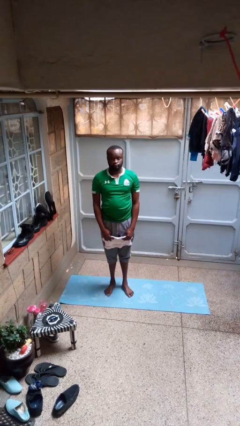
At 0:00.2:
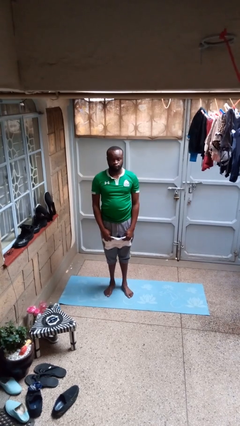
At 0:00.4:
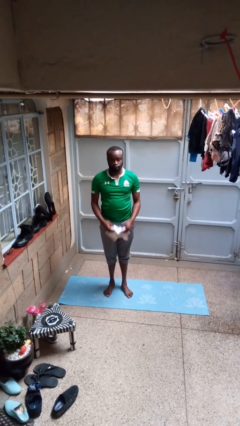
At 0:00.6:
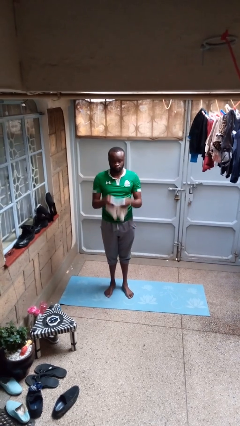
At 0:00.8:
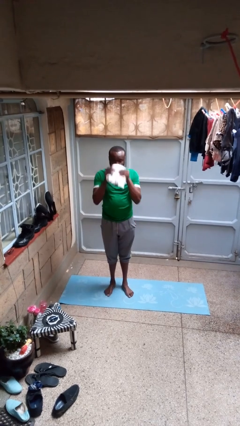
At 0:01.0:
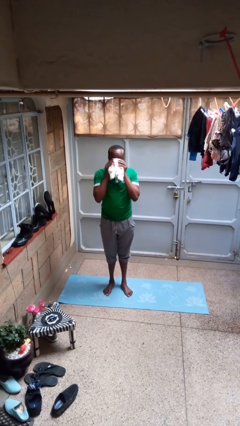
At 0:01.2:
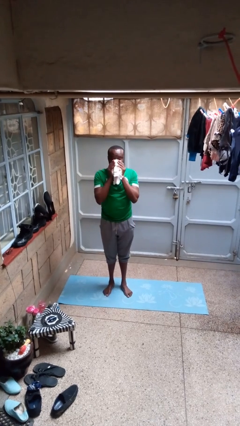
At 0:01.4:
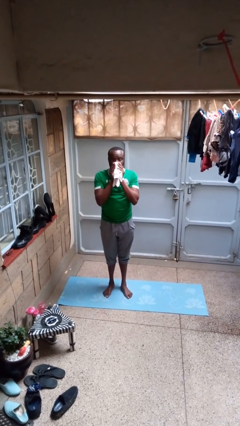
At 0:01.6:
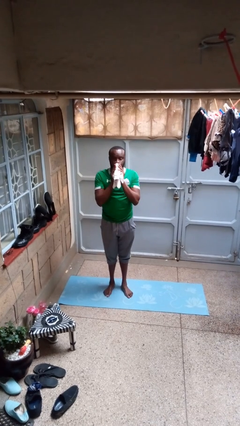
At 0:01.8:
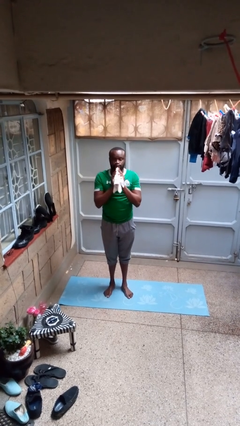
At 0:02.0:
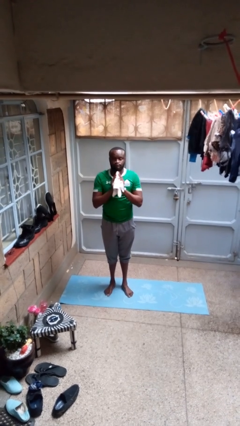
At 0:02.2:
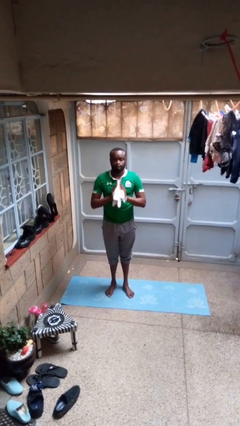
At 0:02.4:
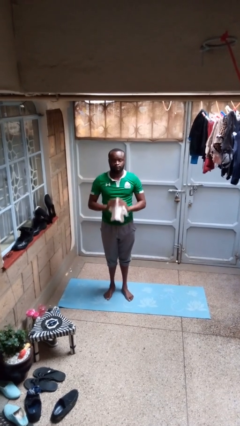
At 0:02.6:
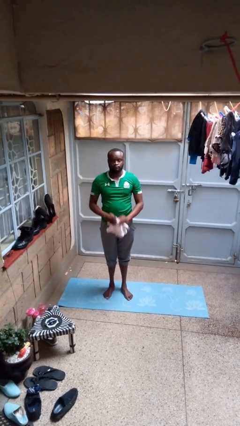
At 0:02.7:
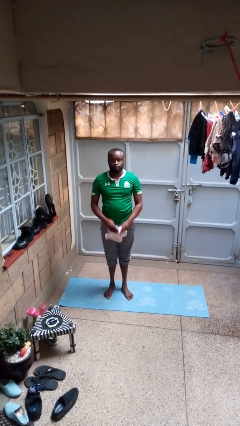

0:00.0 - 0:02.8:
person wipes mouth with napkin

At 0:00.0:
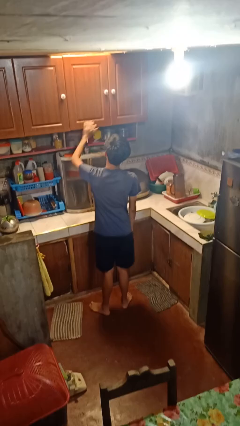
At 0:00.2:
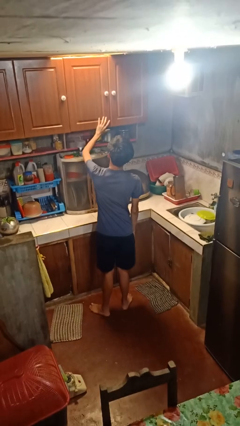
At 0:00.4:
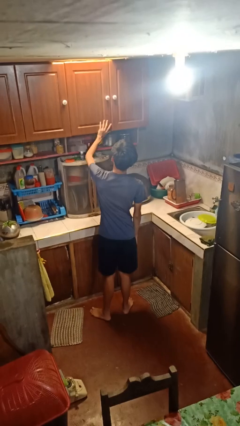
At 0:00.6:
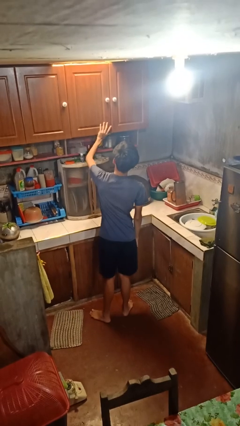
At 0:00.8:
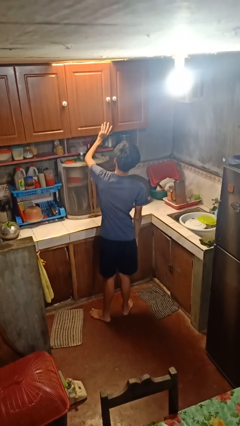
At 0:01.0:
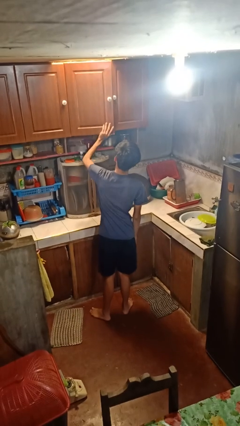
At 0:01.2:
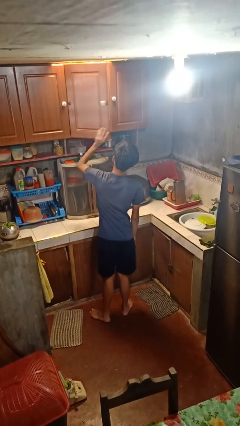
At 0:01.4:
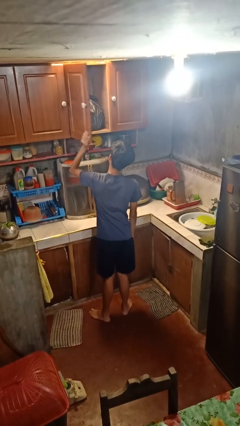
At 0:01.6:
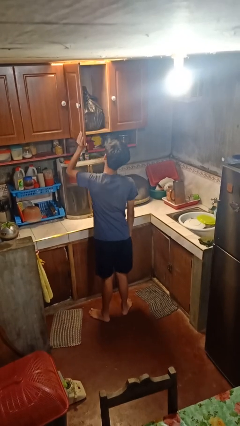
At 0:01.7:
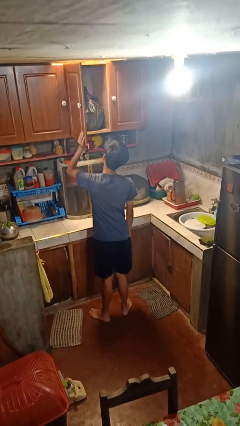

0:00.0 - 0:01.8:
person opens cabinet

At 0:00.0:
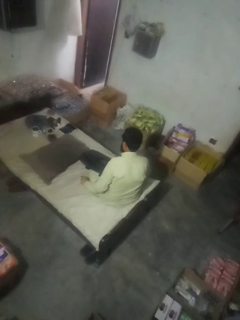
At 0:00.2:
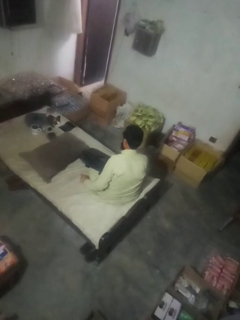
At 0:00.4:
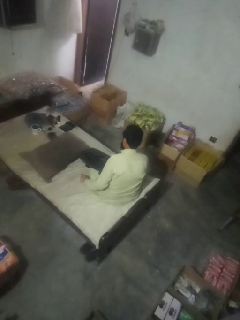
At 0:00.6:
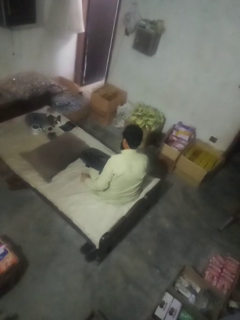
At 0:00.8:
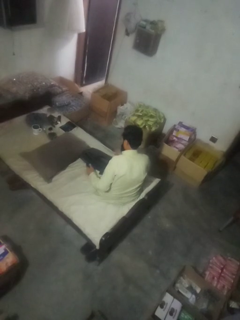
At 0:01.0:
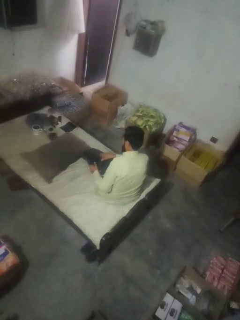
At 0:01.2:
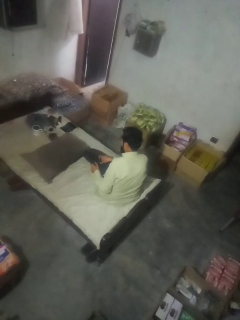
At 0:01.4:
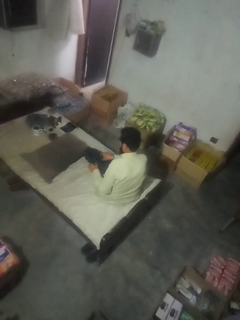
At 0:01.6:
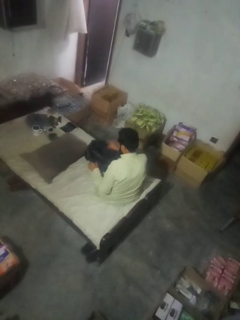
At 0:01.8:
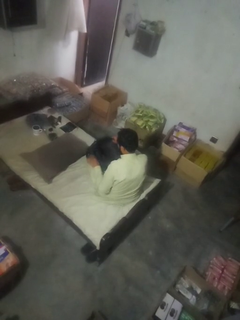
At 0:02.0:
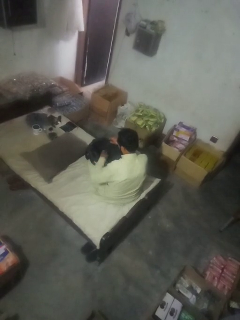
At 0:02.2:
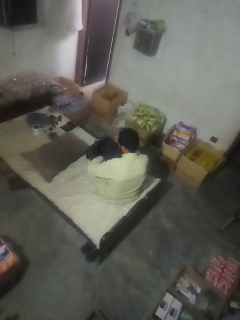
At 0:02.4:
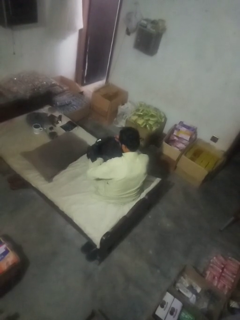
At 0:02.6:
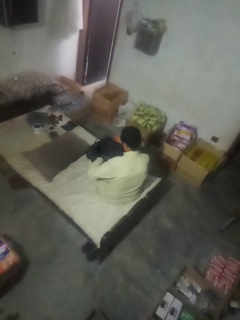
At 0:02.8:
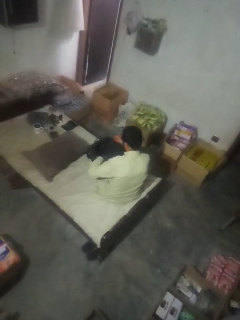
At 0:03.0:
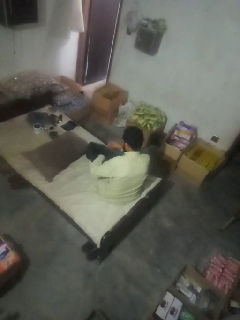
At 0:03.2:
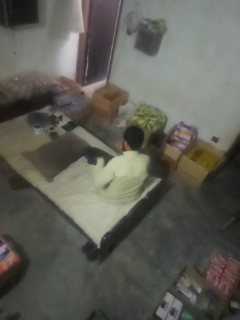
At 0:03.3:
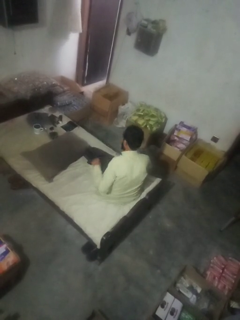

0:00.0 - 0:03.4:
person searches in bag

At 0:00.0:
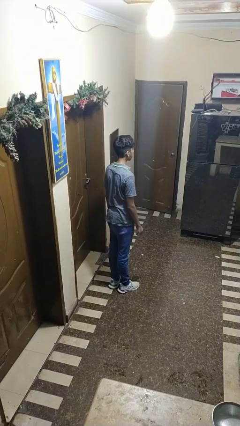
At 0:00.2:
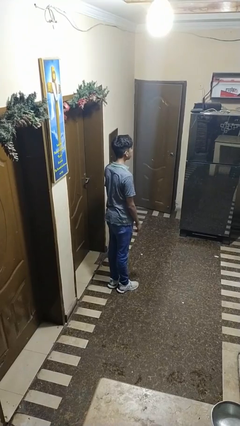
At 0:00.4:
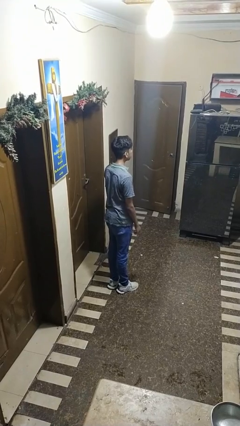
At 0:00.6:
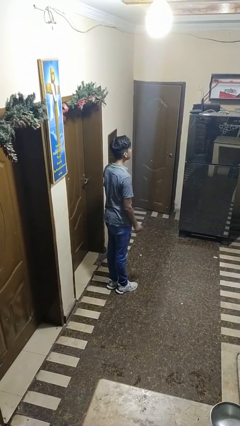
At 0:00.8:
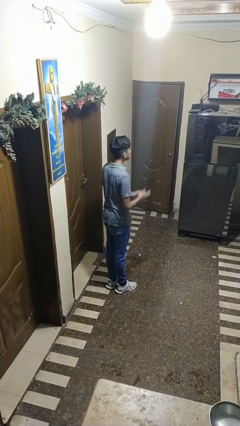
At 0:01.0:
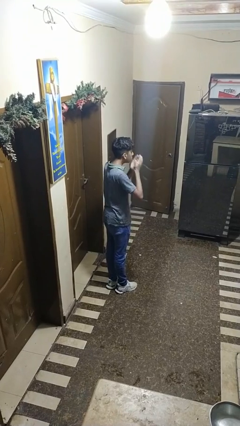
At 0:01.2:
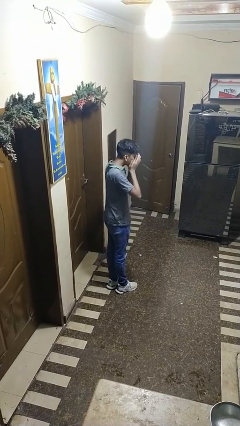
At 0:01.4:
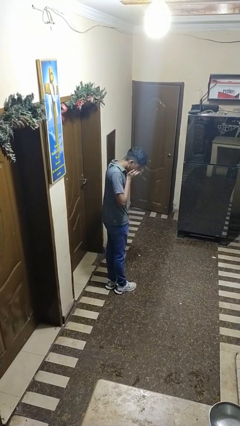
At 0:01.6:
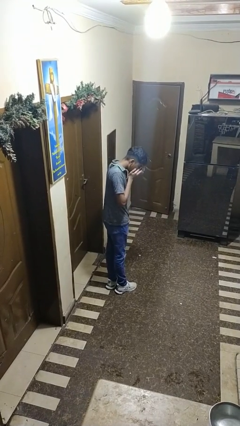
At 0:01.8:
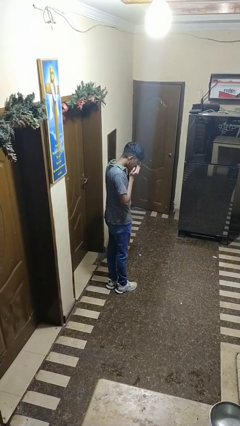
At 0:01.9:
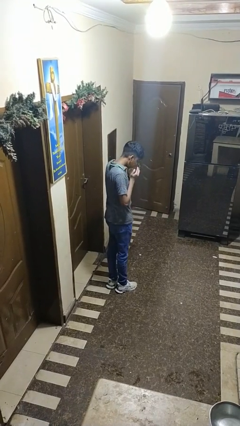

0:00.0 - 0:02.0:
person sneezes into hand

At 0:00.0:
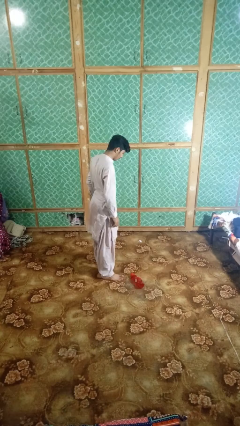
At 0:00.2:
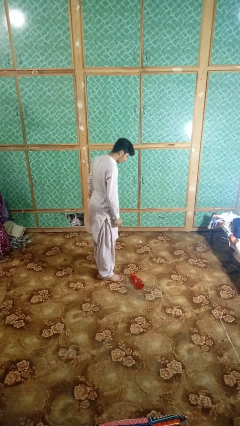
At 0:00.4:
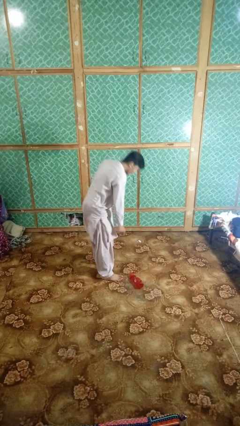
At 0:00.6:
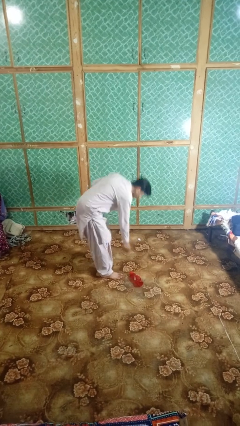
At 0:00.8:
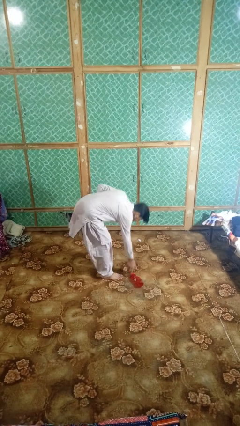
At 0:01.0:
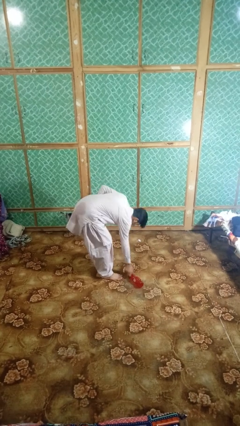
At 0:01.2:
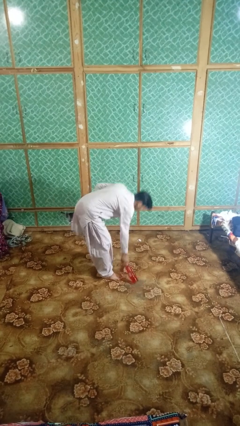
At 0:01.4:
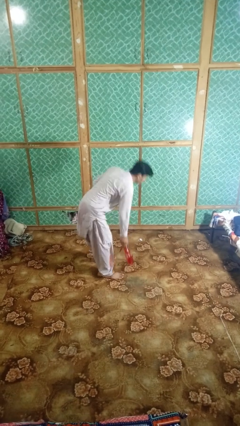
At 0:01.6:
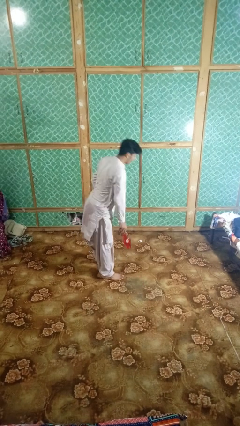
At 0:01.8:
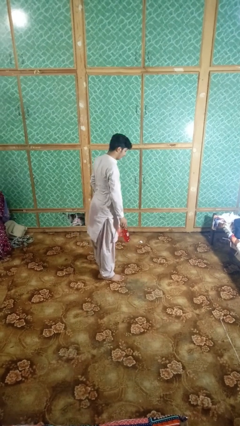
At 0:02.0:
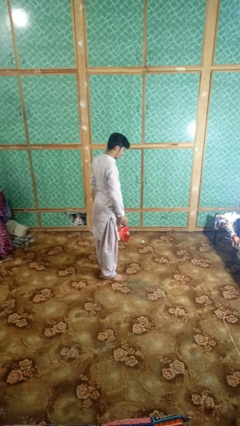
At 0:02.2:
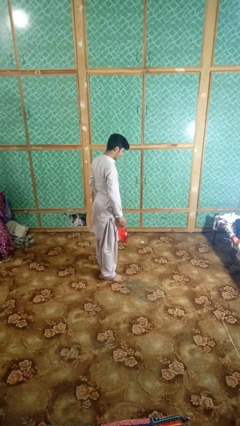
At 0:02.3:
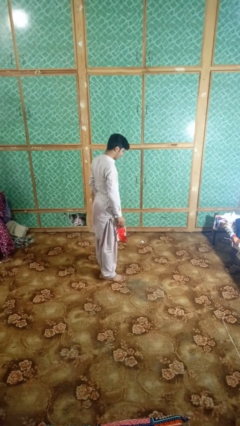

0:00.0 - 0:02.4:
person picks up object from floor

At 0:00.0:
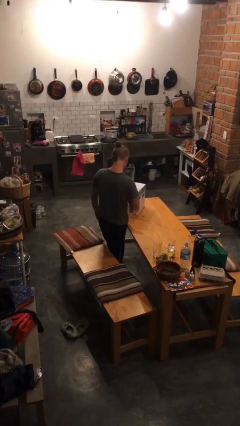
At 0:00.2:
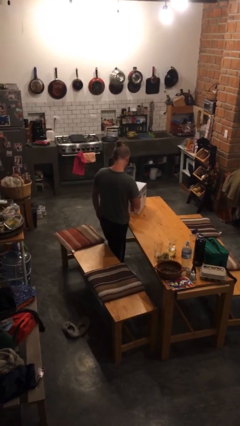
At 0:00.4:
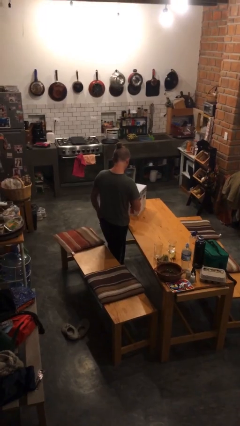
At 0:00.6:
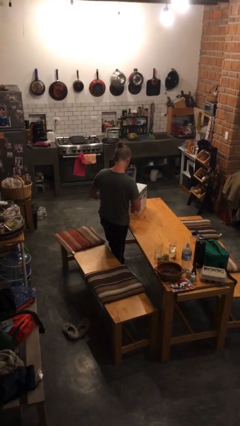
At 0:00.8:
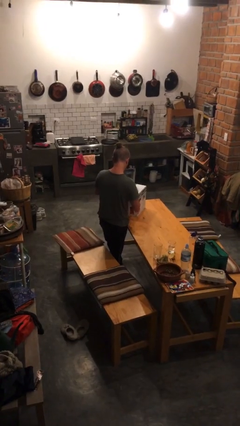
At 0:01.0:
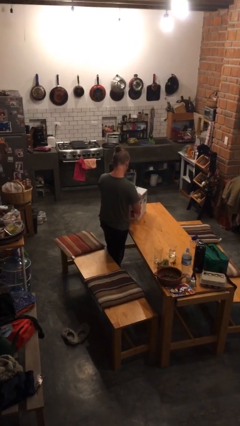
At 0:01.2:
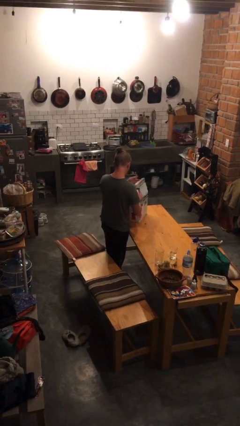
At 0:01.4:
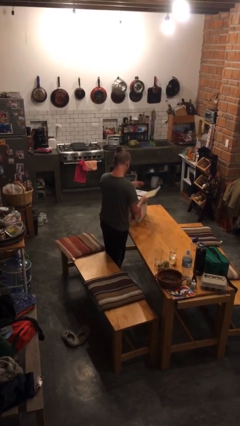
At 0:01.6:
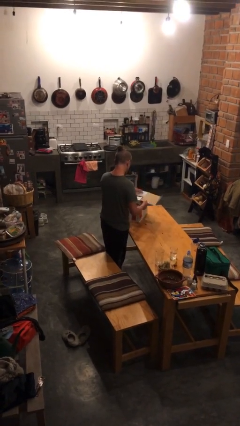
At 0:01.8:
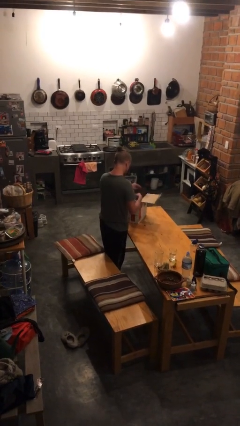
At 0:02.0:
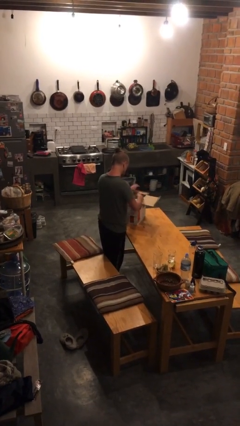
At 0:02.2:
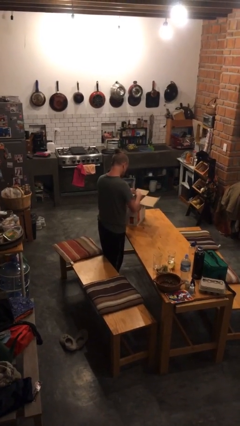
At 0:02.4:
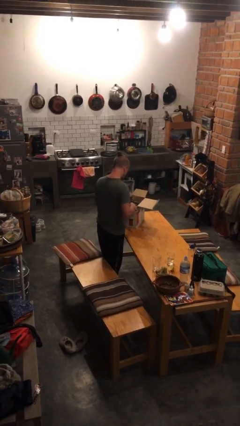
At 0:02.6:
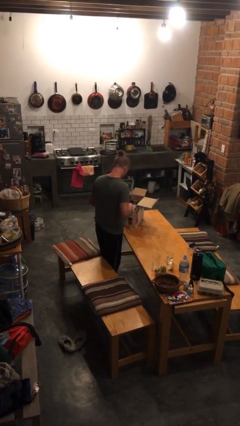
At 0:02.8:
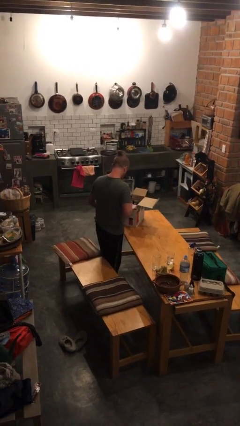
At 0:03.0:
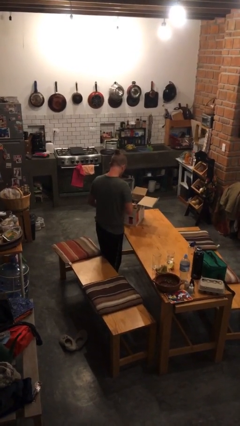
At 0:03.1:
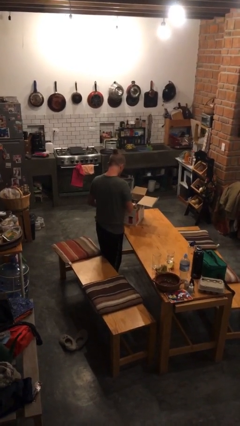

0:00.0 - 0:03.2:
person opens box

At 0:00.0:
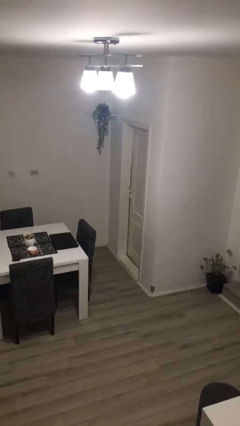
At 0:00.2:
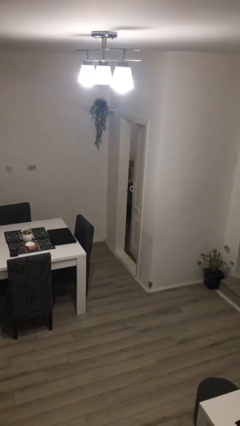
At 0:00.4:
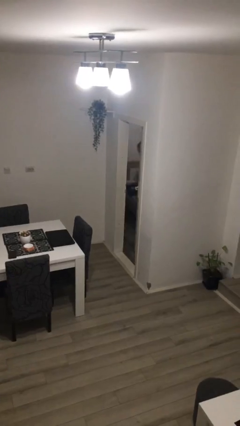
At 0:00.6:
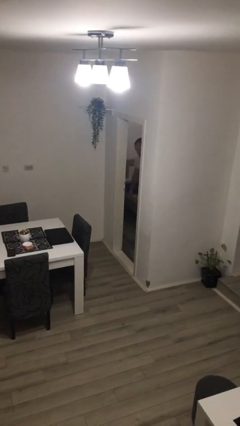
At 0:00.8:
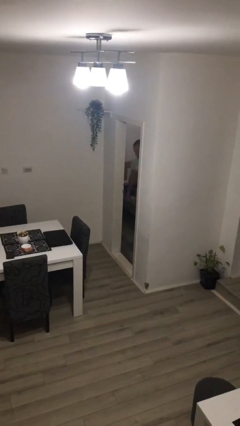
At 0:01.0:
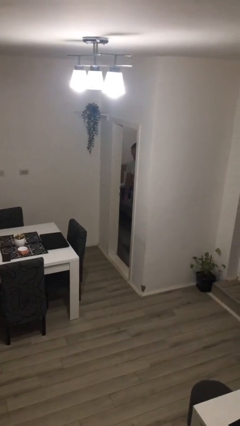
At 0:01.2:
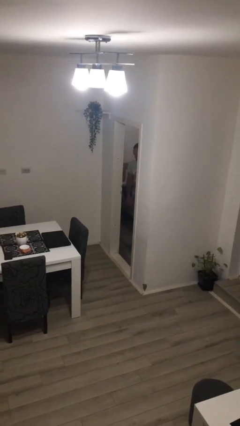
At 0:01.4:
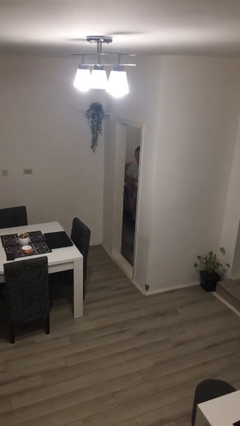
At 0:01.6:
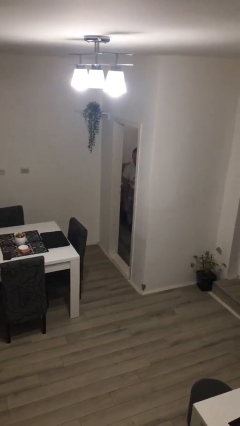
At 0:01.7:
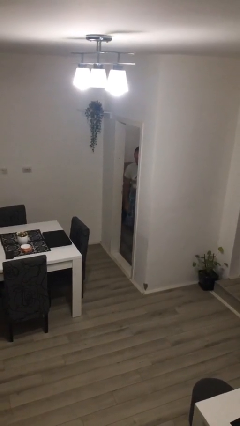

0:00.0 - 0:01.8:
person opens facility door

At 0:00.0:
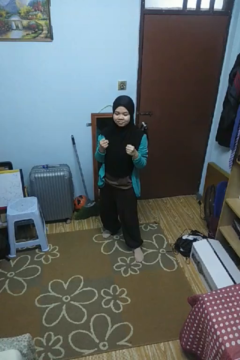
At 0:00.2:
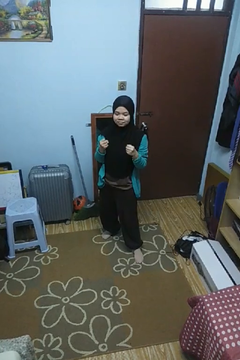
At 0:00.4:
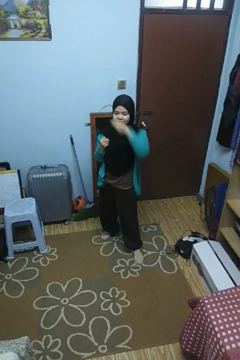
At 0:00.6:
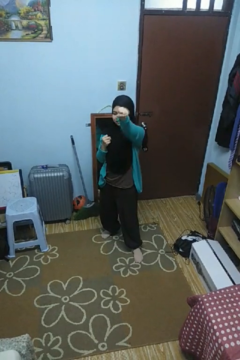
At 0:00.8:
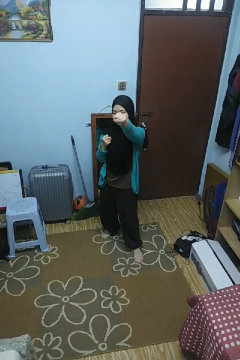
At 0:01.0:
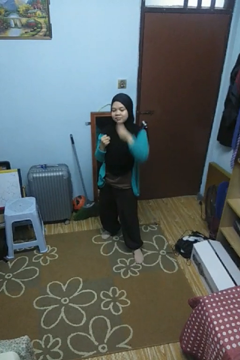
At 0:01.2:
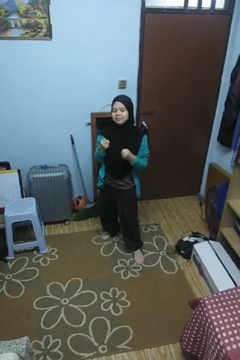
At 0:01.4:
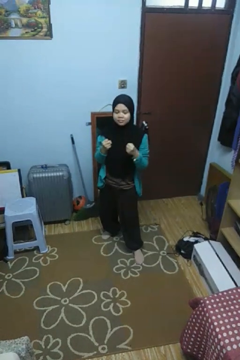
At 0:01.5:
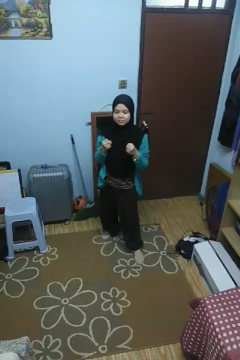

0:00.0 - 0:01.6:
person punches
